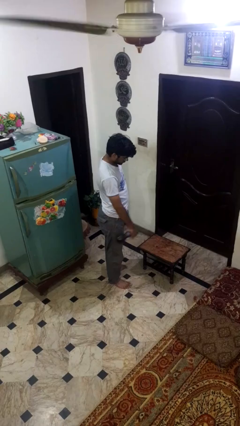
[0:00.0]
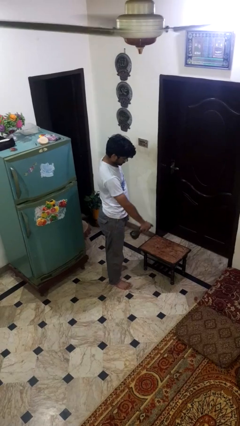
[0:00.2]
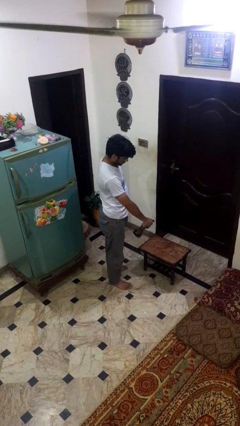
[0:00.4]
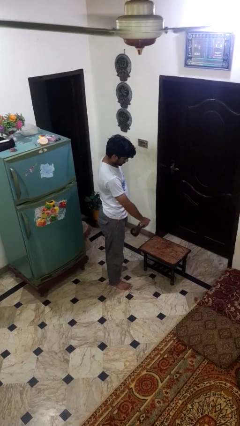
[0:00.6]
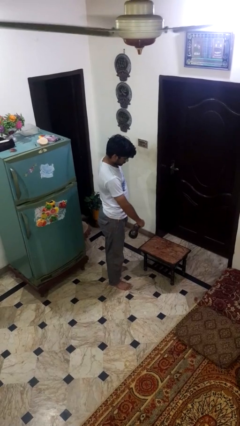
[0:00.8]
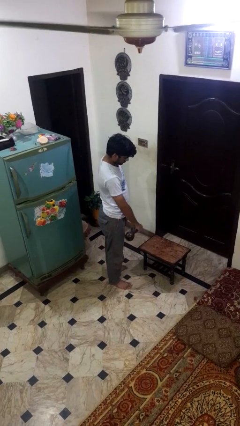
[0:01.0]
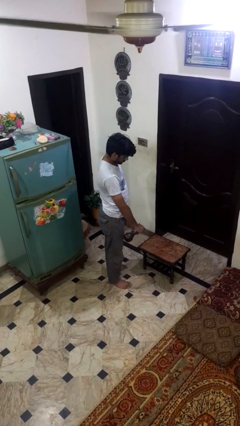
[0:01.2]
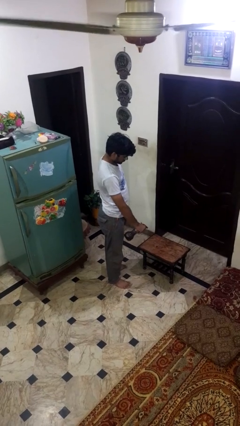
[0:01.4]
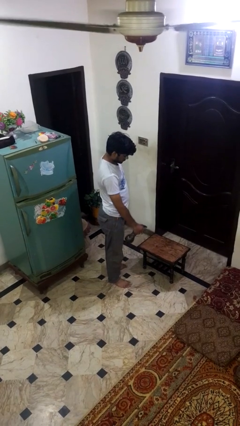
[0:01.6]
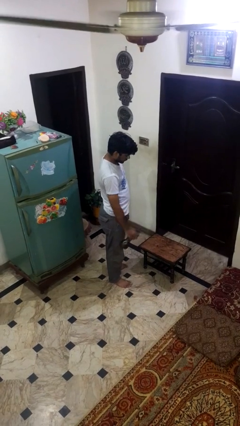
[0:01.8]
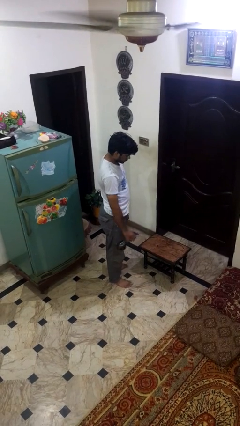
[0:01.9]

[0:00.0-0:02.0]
person sprays from bottle

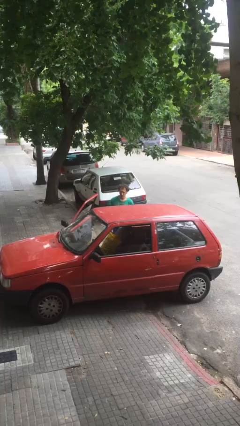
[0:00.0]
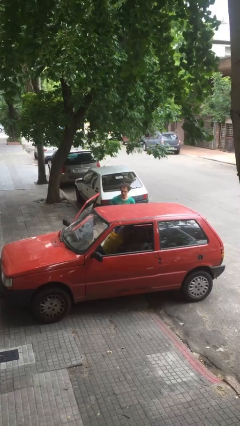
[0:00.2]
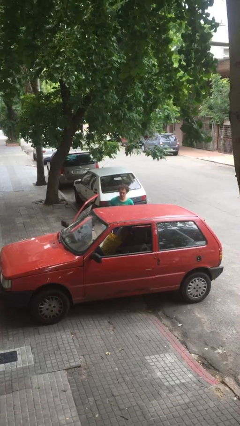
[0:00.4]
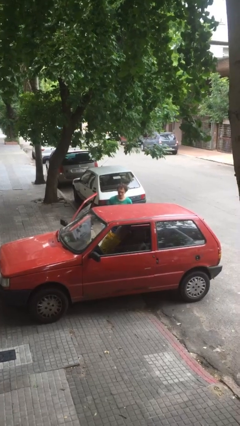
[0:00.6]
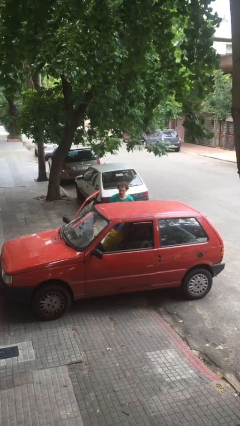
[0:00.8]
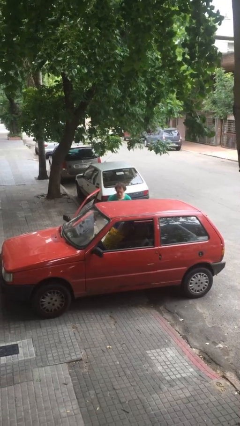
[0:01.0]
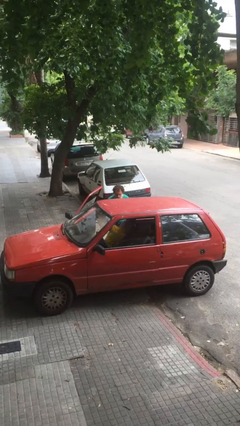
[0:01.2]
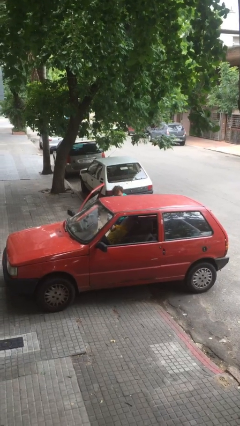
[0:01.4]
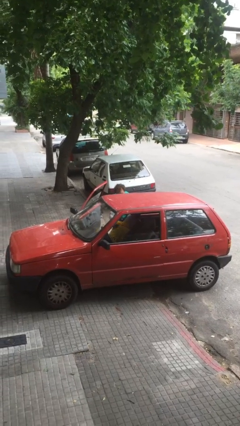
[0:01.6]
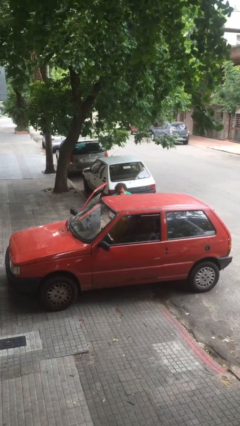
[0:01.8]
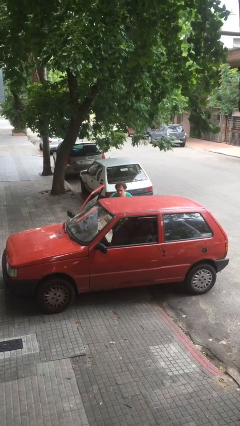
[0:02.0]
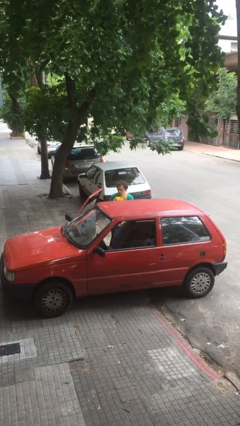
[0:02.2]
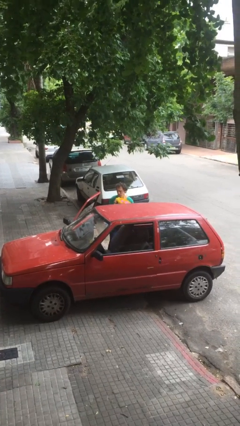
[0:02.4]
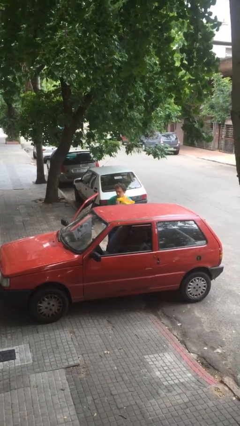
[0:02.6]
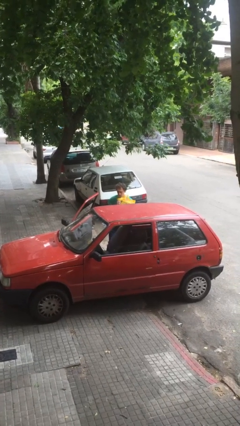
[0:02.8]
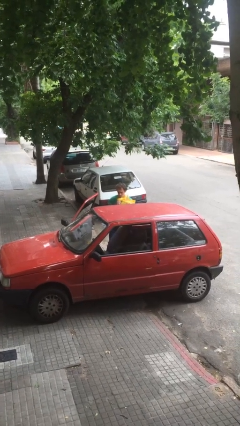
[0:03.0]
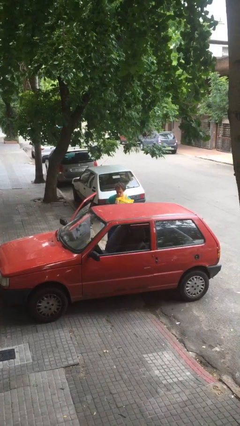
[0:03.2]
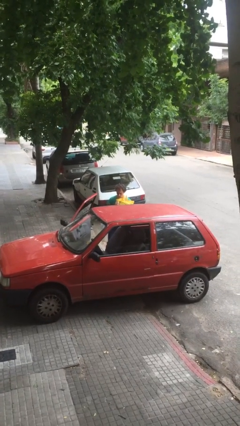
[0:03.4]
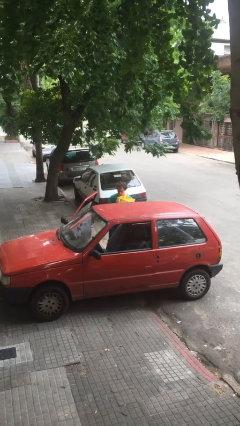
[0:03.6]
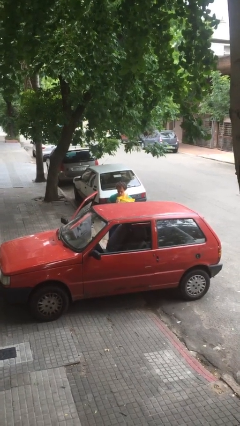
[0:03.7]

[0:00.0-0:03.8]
person unloads car

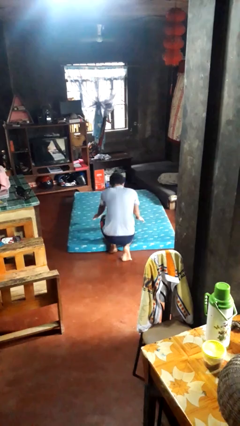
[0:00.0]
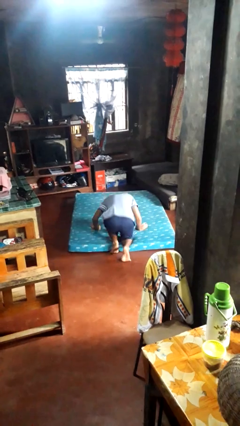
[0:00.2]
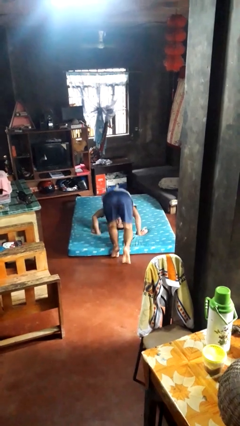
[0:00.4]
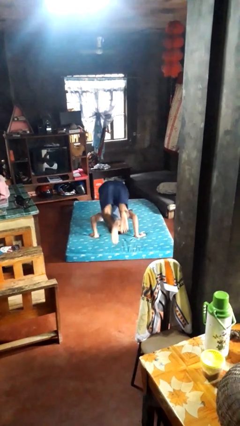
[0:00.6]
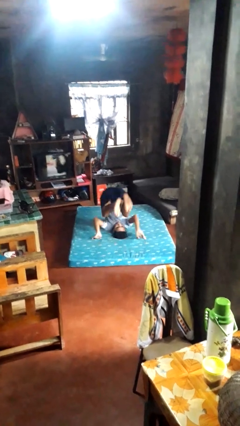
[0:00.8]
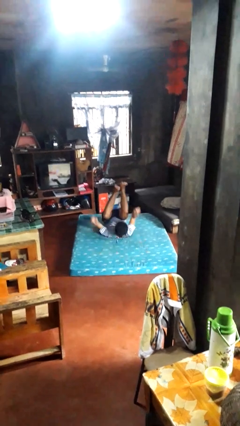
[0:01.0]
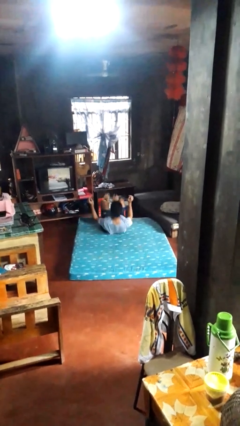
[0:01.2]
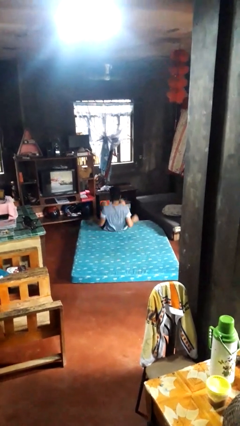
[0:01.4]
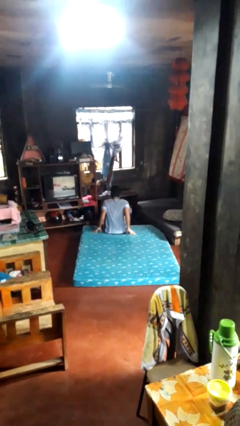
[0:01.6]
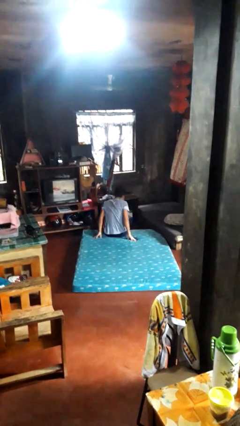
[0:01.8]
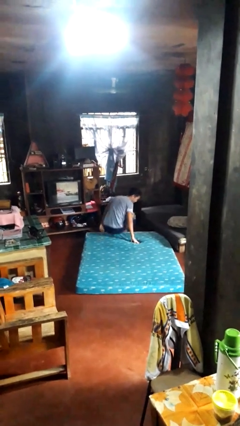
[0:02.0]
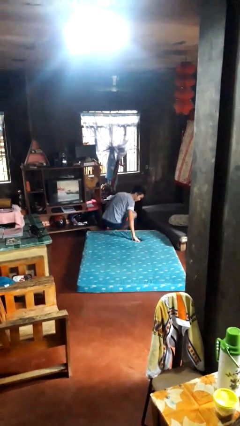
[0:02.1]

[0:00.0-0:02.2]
person somersaults

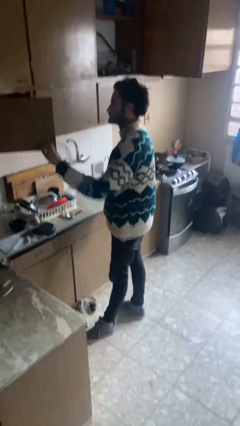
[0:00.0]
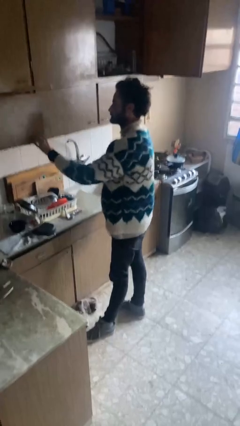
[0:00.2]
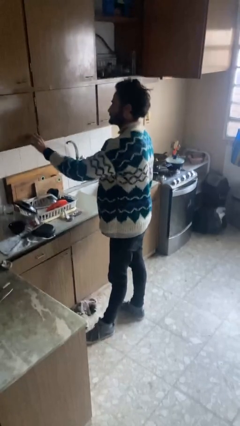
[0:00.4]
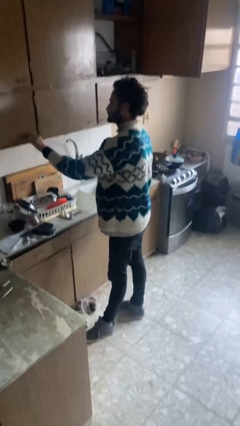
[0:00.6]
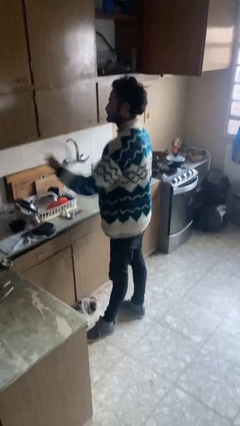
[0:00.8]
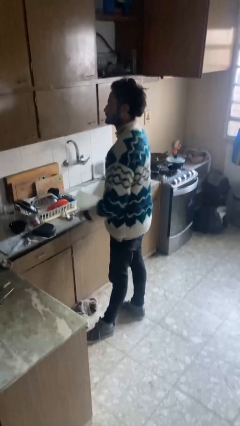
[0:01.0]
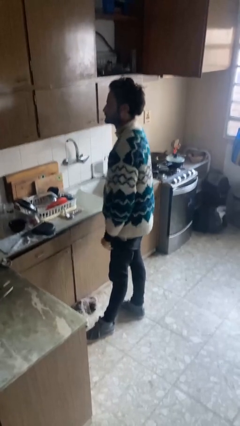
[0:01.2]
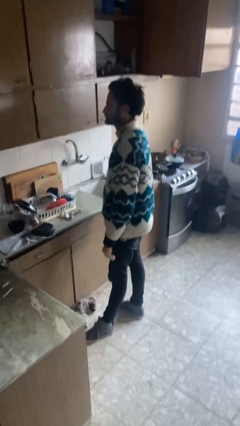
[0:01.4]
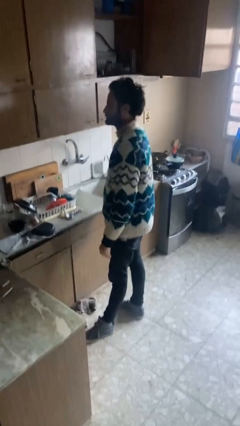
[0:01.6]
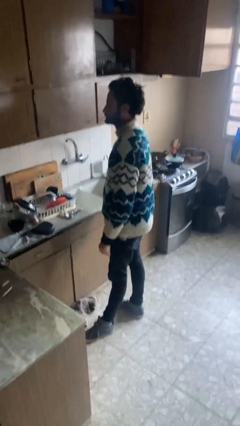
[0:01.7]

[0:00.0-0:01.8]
person closes cabinet

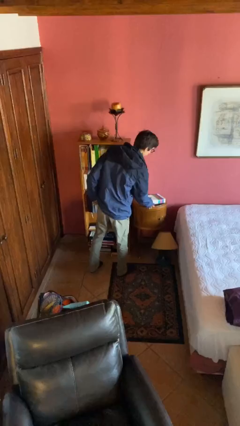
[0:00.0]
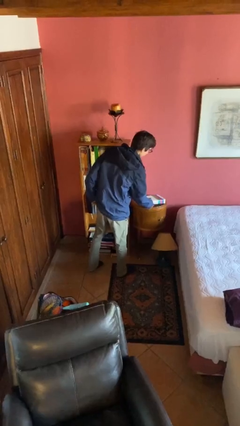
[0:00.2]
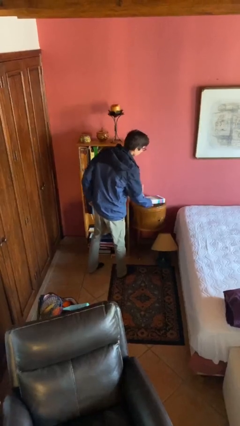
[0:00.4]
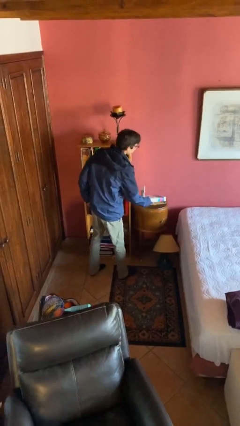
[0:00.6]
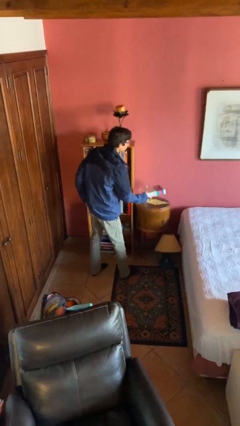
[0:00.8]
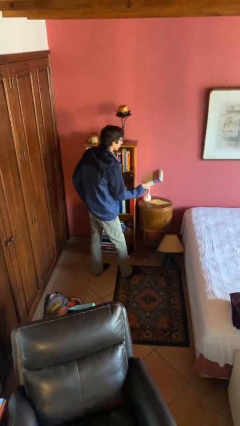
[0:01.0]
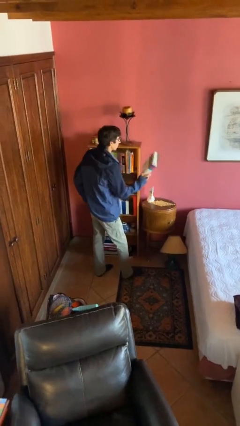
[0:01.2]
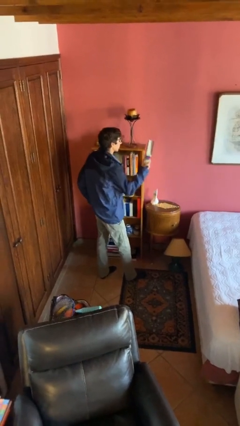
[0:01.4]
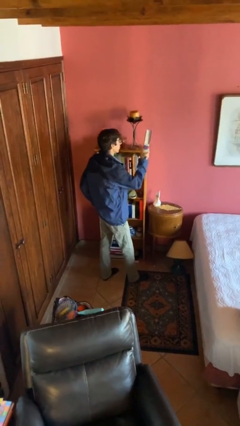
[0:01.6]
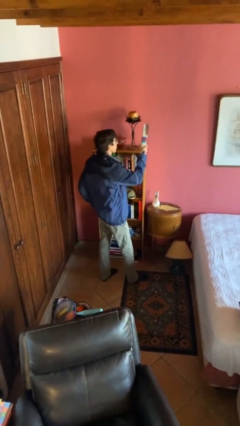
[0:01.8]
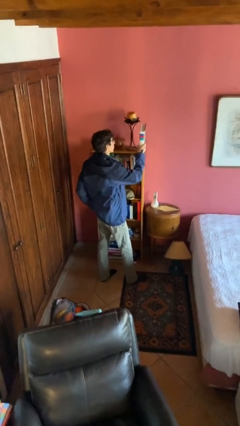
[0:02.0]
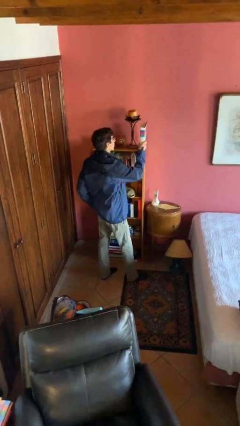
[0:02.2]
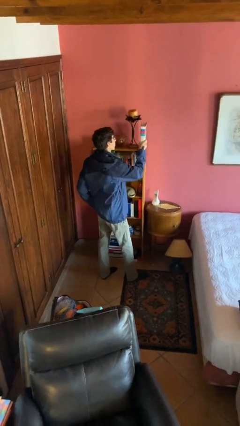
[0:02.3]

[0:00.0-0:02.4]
person picks up object from table

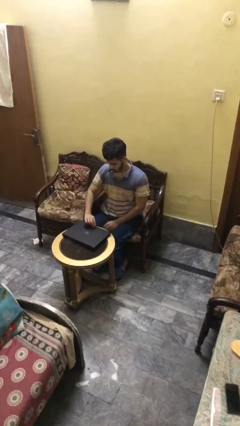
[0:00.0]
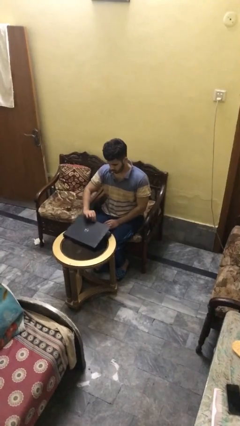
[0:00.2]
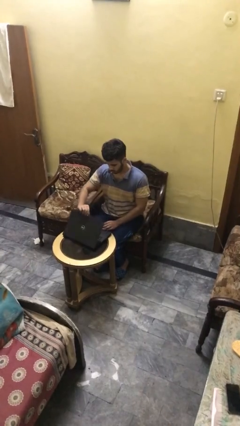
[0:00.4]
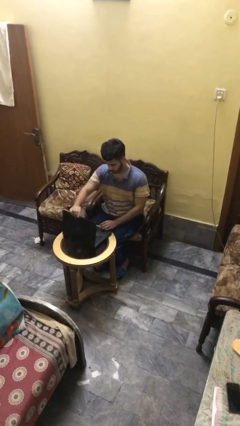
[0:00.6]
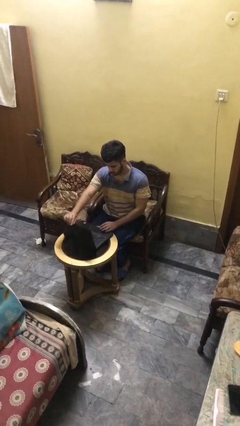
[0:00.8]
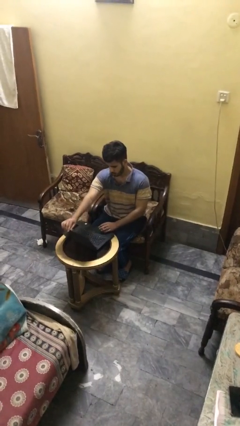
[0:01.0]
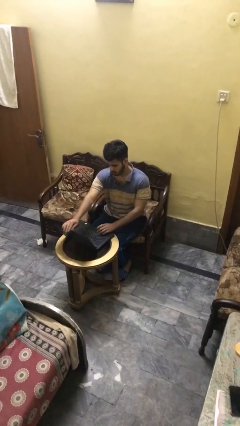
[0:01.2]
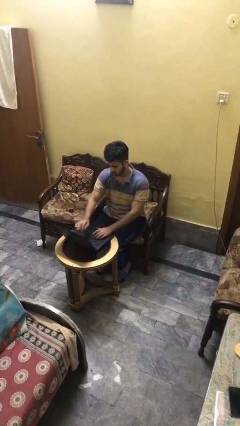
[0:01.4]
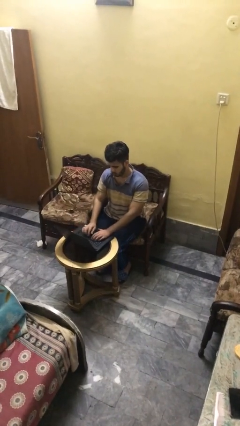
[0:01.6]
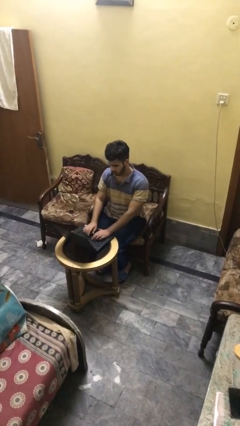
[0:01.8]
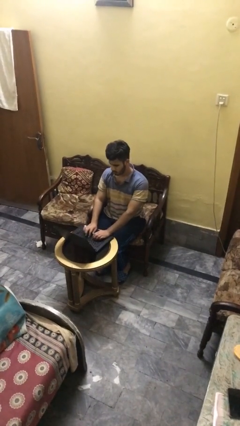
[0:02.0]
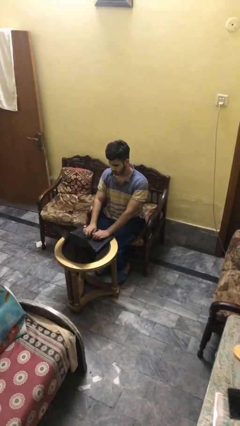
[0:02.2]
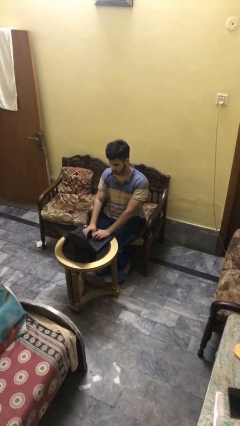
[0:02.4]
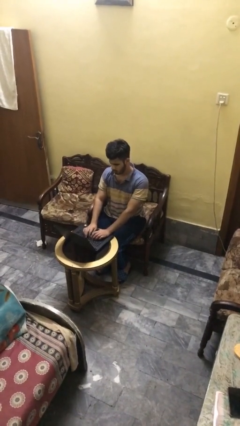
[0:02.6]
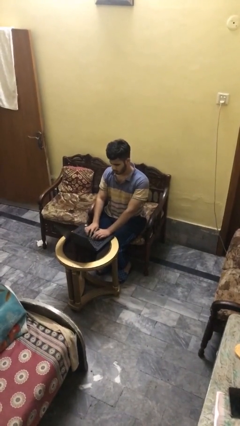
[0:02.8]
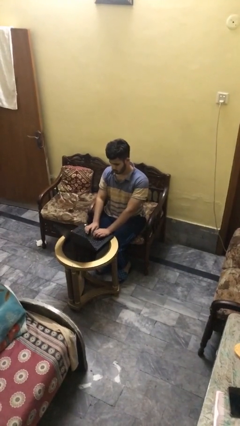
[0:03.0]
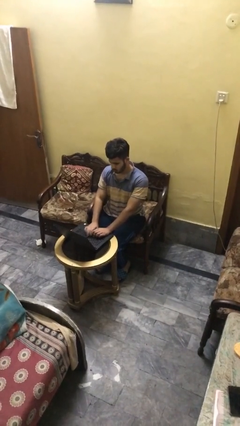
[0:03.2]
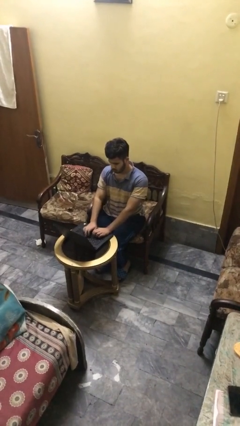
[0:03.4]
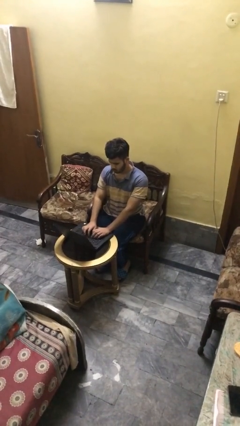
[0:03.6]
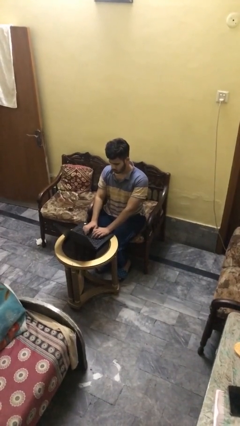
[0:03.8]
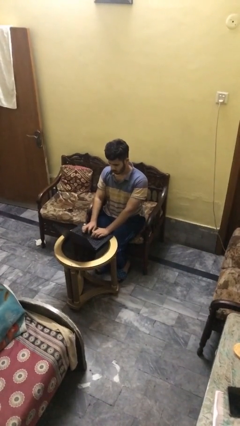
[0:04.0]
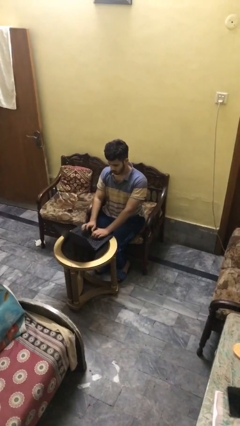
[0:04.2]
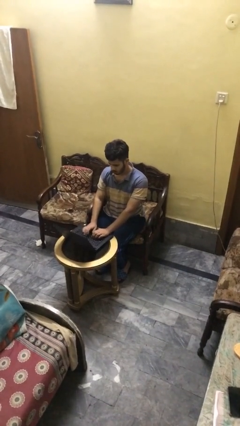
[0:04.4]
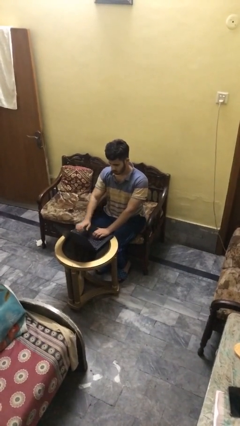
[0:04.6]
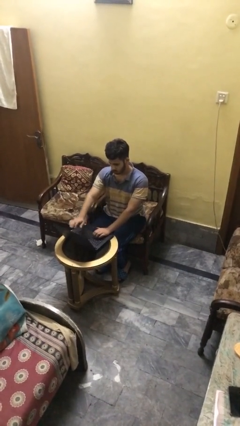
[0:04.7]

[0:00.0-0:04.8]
person interacts with laptop

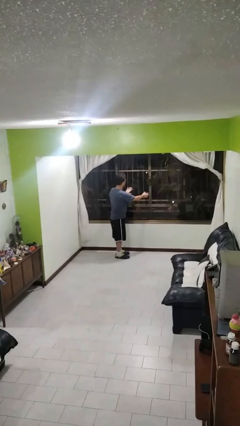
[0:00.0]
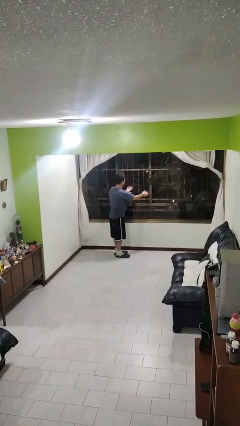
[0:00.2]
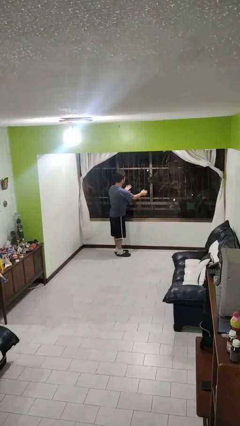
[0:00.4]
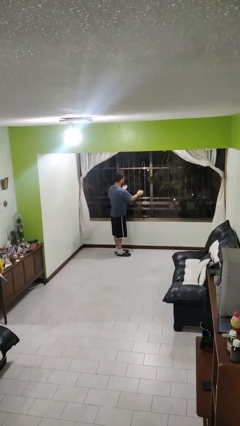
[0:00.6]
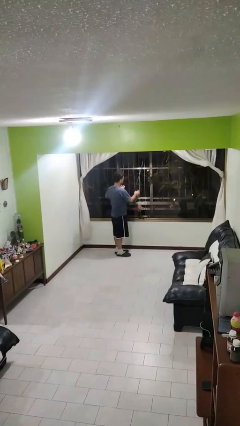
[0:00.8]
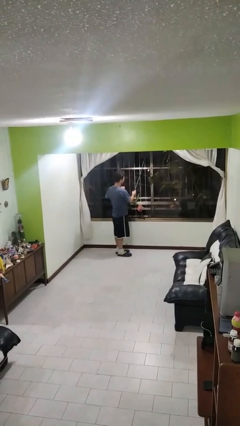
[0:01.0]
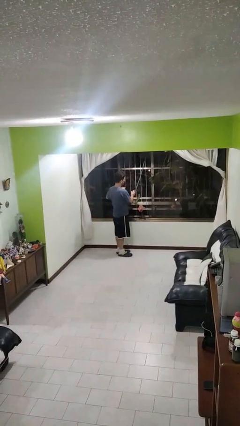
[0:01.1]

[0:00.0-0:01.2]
person opens home window
